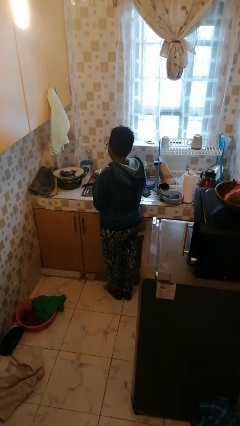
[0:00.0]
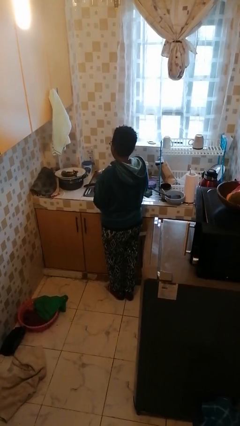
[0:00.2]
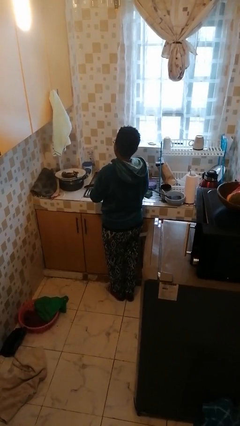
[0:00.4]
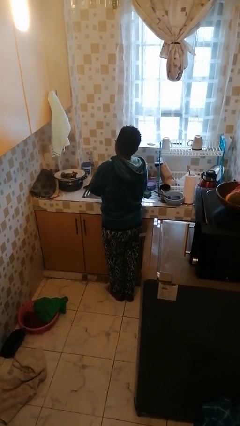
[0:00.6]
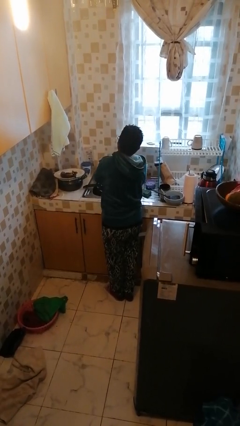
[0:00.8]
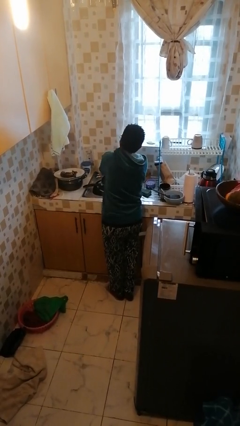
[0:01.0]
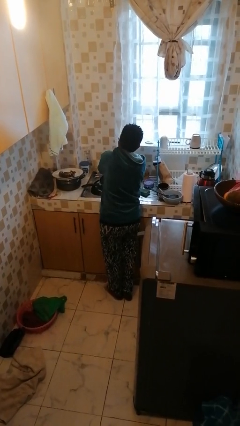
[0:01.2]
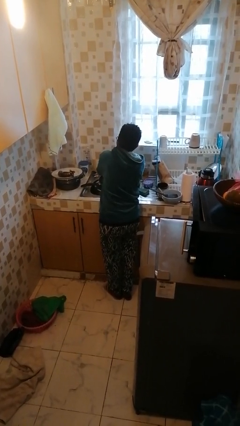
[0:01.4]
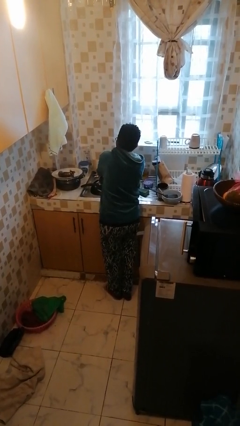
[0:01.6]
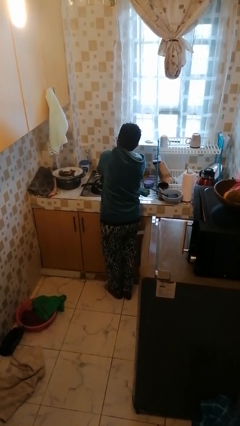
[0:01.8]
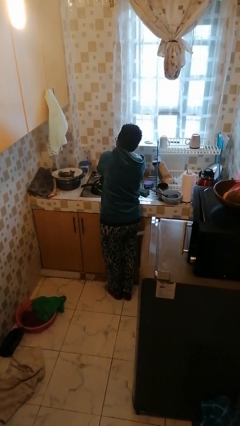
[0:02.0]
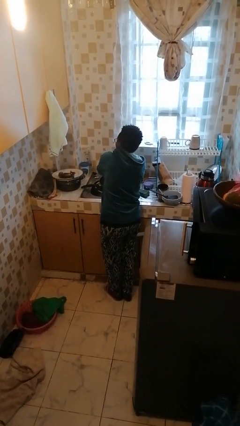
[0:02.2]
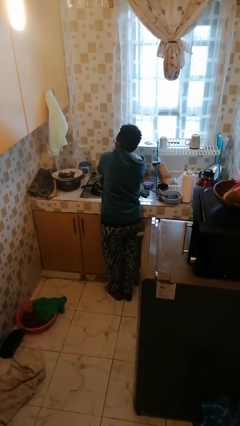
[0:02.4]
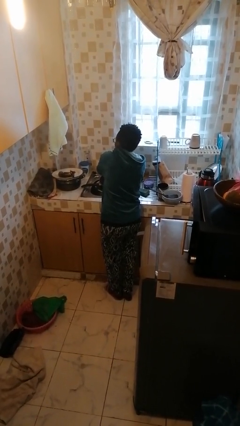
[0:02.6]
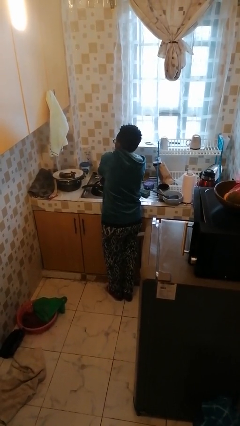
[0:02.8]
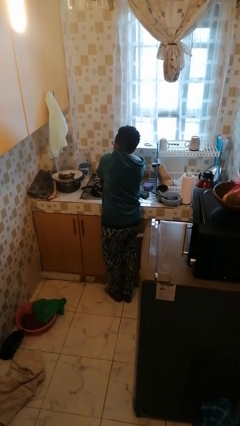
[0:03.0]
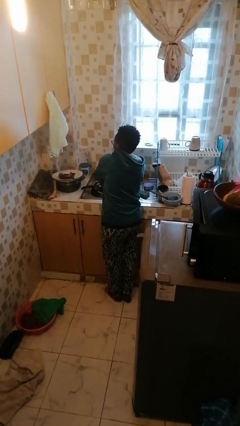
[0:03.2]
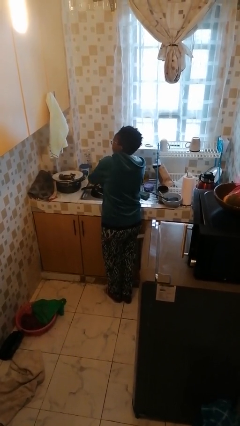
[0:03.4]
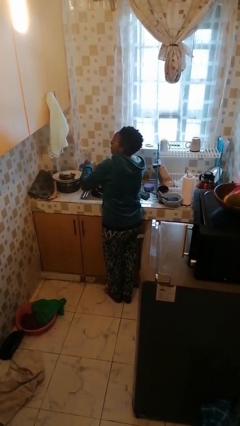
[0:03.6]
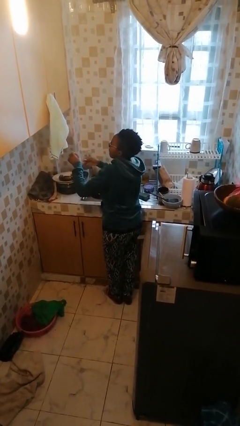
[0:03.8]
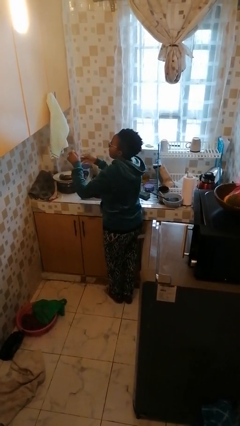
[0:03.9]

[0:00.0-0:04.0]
person washes hands

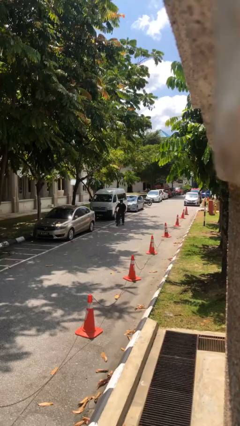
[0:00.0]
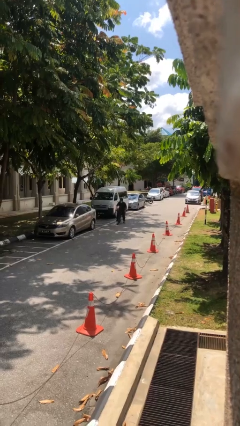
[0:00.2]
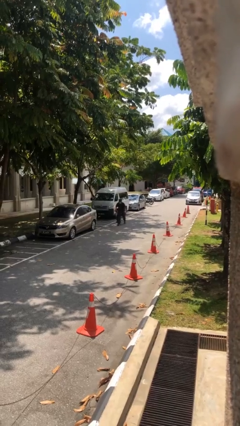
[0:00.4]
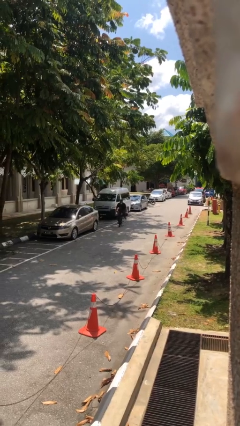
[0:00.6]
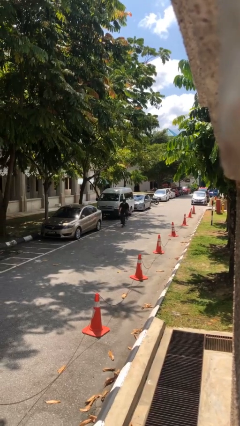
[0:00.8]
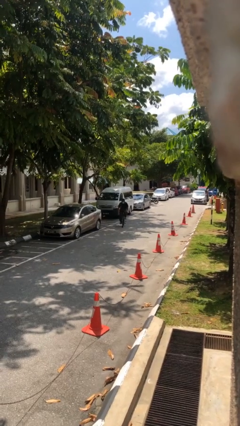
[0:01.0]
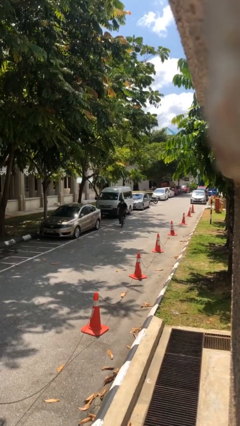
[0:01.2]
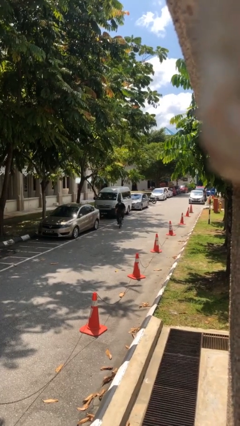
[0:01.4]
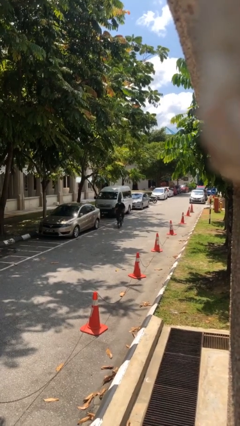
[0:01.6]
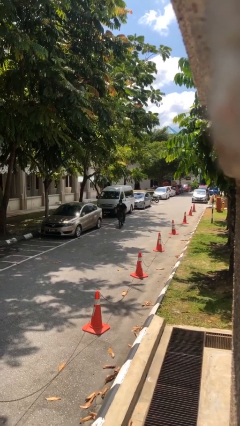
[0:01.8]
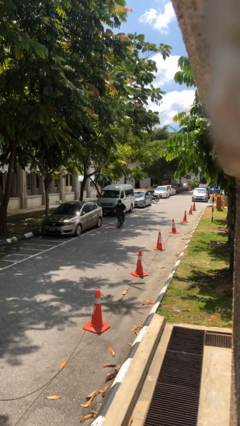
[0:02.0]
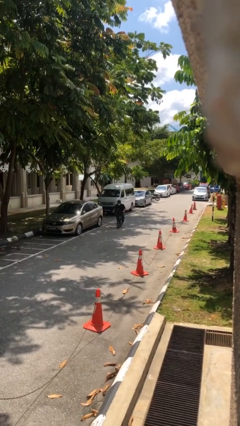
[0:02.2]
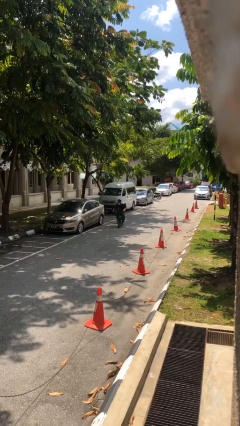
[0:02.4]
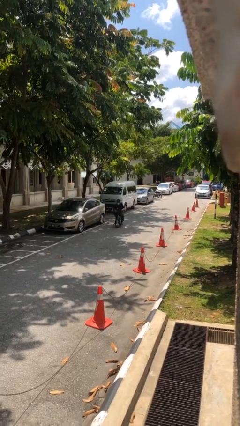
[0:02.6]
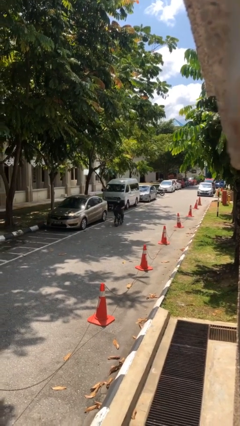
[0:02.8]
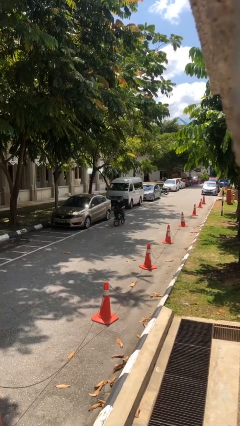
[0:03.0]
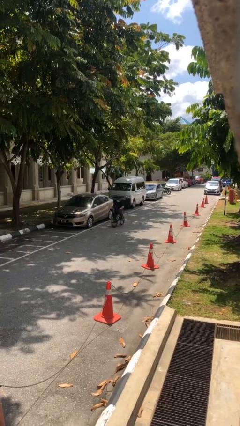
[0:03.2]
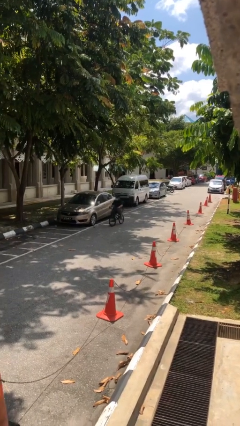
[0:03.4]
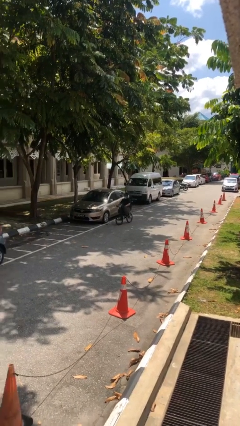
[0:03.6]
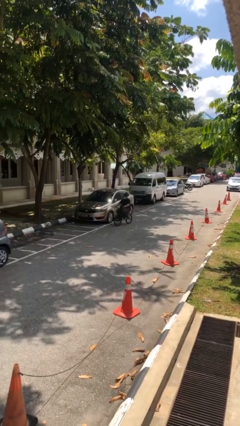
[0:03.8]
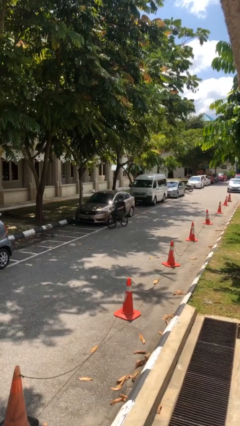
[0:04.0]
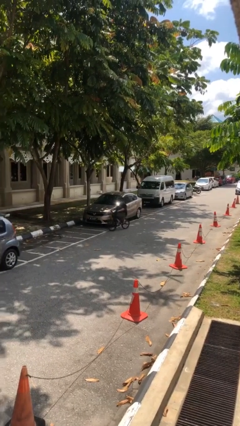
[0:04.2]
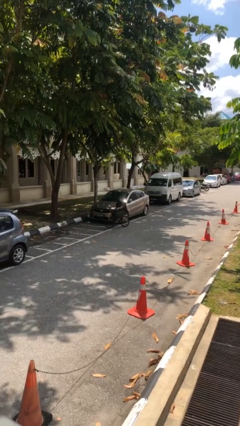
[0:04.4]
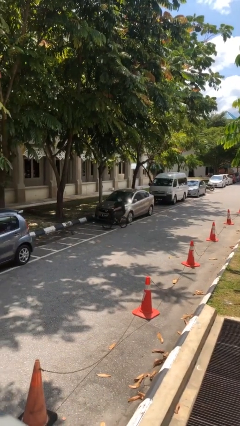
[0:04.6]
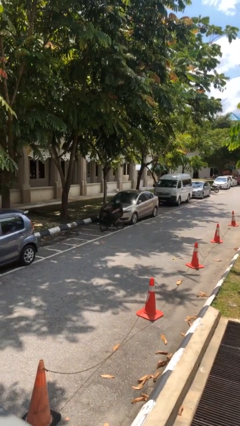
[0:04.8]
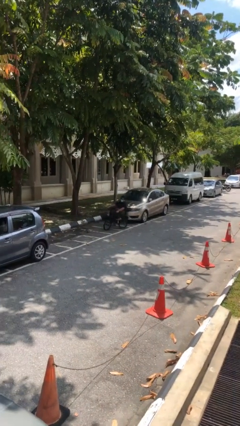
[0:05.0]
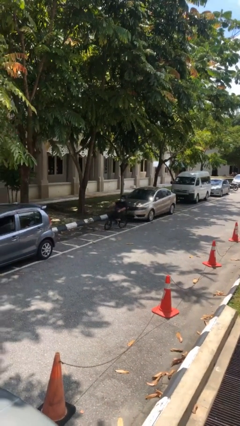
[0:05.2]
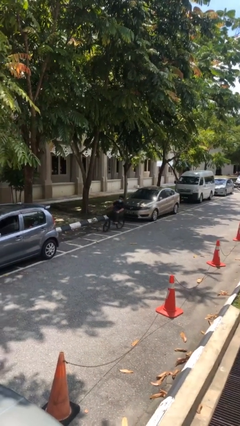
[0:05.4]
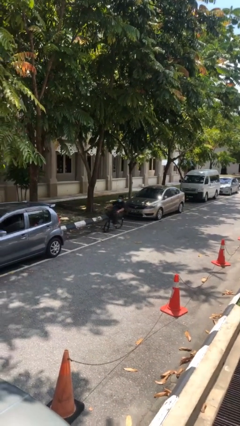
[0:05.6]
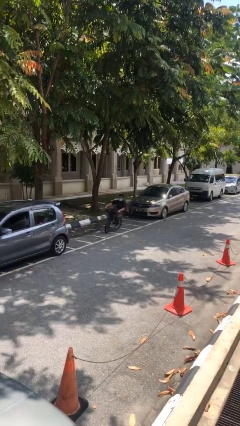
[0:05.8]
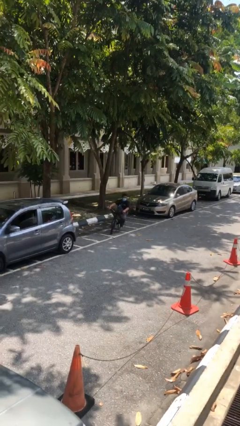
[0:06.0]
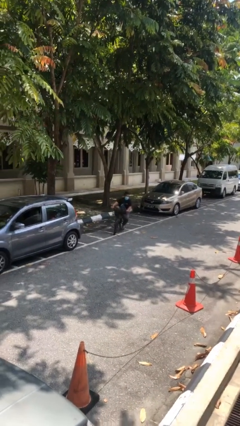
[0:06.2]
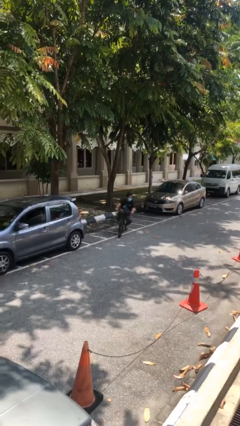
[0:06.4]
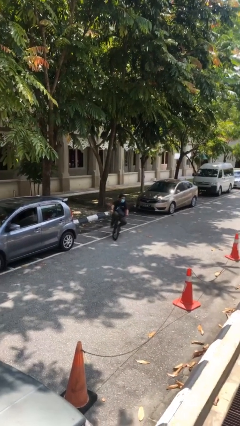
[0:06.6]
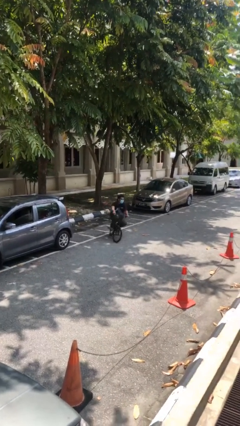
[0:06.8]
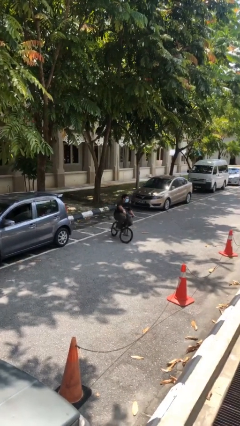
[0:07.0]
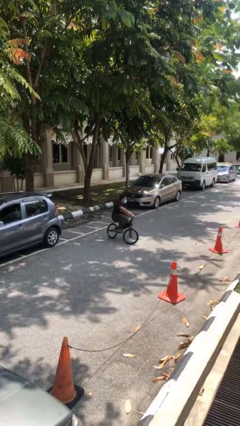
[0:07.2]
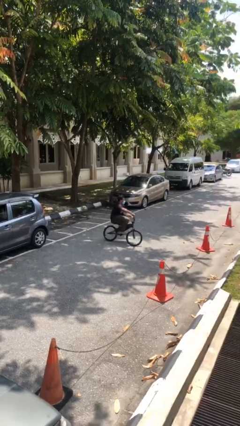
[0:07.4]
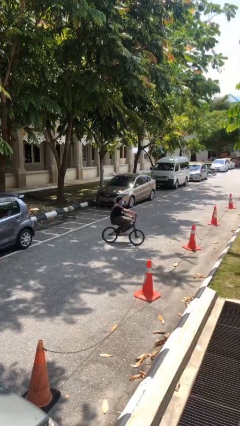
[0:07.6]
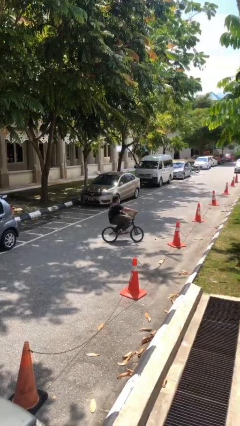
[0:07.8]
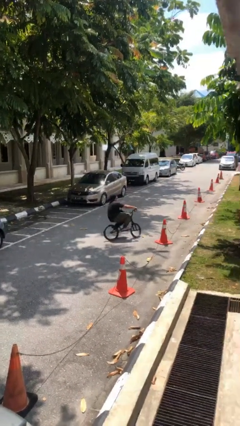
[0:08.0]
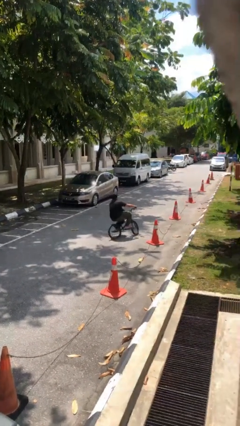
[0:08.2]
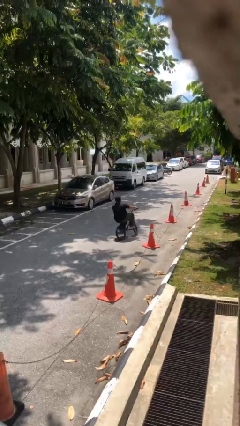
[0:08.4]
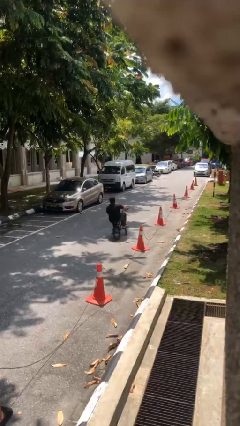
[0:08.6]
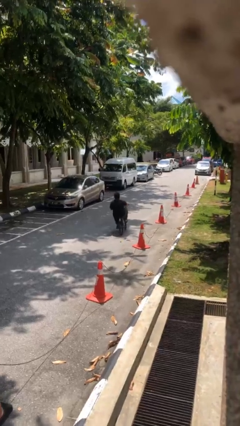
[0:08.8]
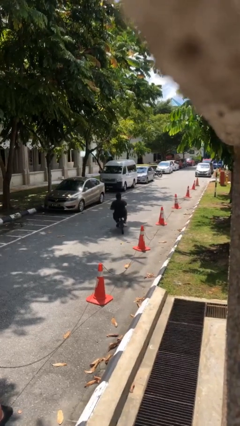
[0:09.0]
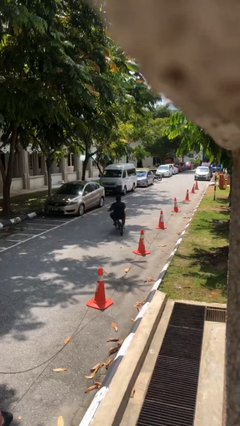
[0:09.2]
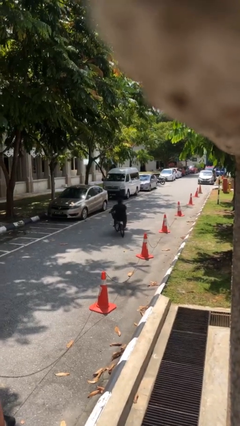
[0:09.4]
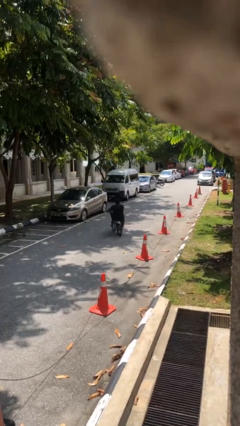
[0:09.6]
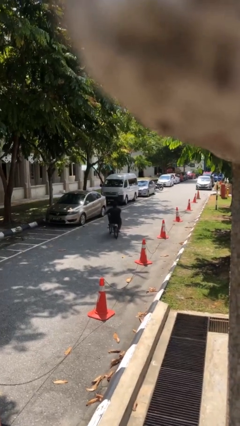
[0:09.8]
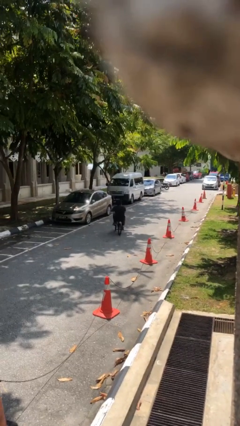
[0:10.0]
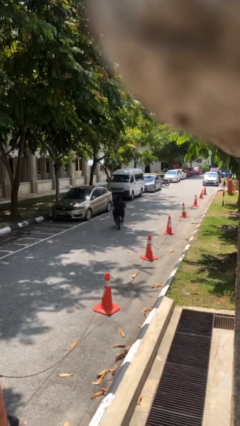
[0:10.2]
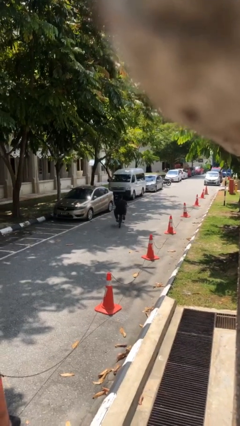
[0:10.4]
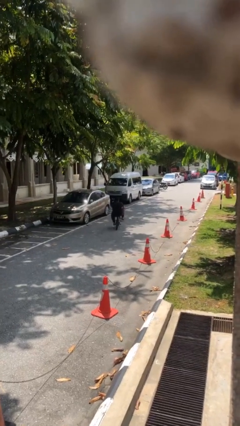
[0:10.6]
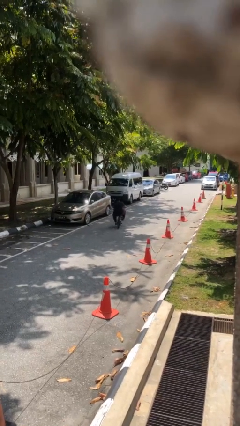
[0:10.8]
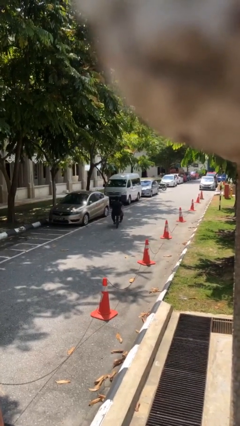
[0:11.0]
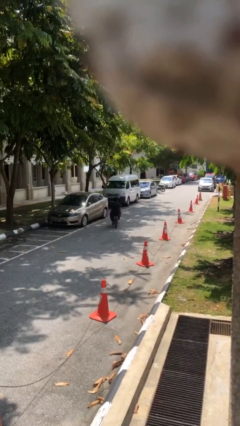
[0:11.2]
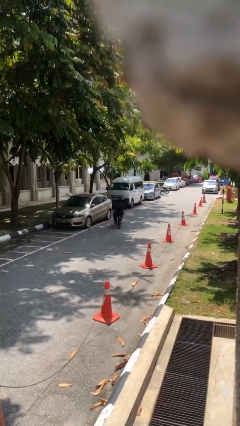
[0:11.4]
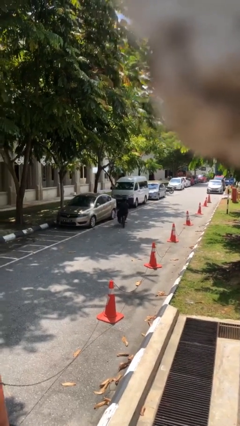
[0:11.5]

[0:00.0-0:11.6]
person rides bicycle

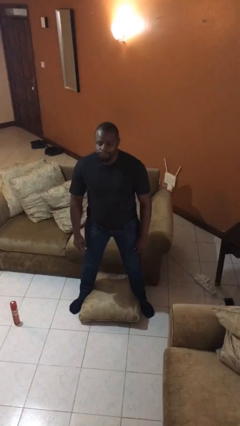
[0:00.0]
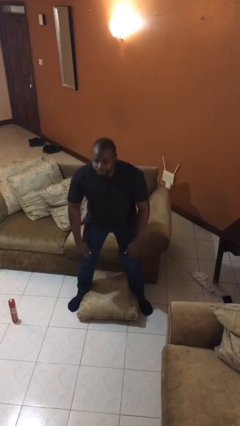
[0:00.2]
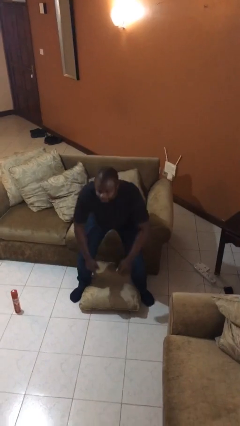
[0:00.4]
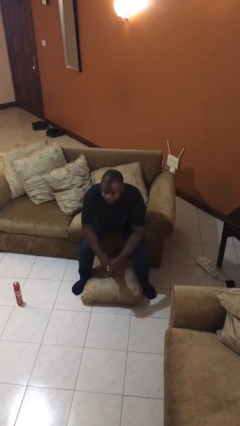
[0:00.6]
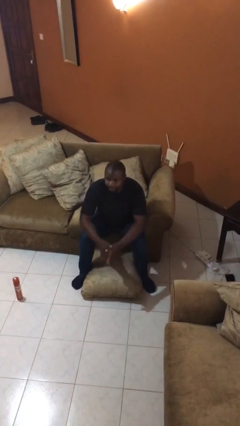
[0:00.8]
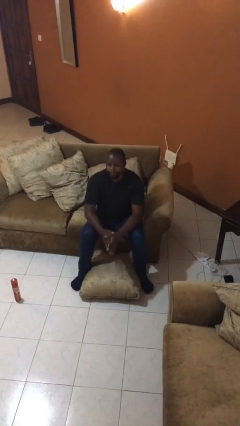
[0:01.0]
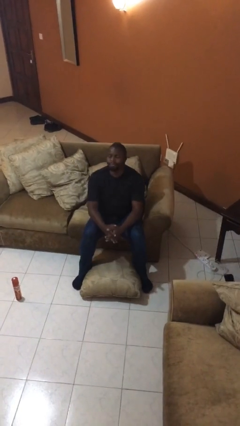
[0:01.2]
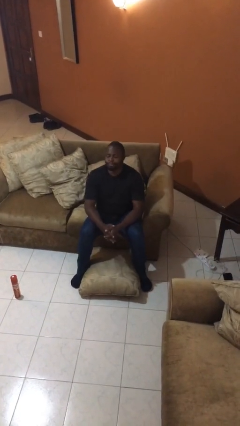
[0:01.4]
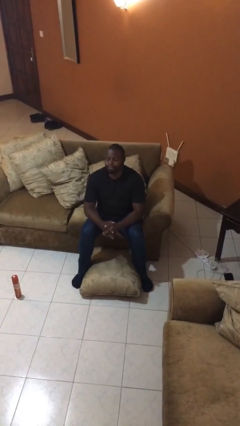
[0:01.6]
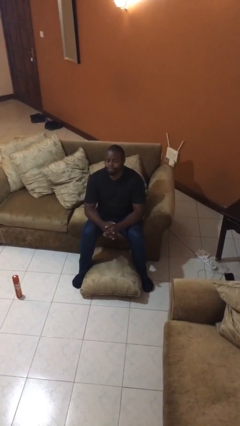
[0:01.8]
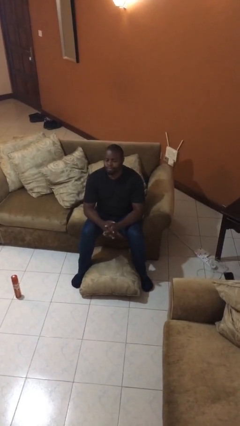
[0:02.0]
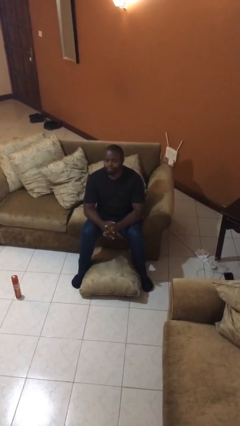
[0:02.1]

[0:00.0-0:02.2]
person sits down

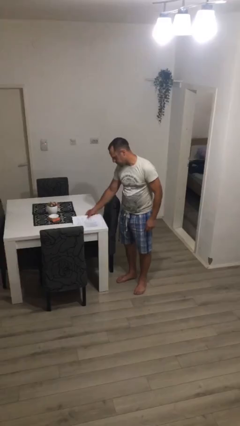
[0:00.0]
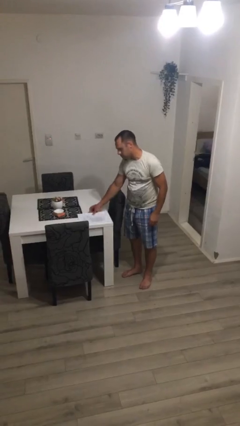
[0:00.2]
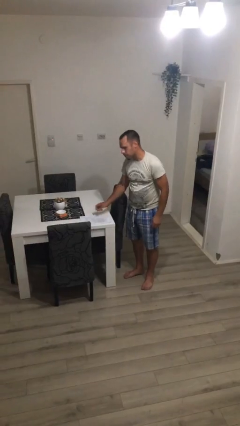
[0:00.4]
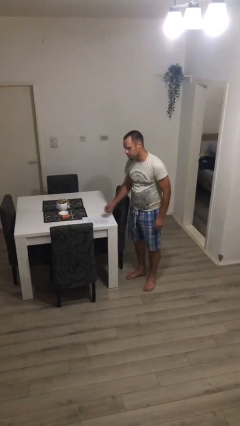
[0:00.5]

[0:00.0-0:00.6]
person puts down object on table
